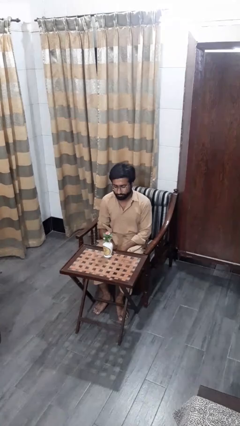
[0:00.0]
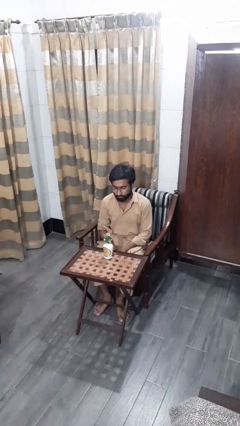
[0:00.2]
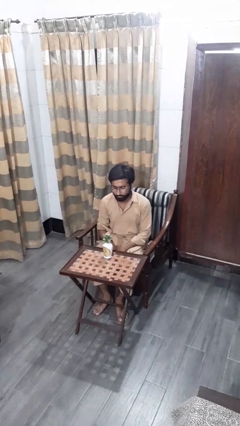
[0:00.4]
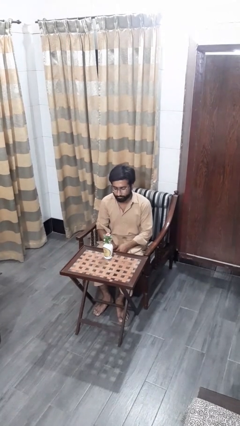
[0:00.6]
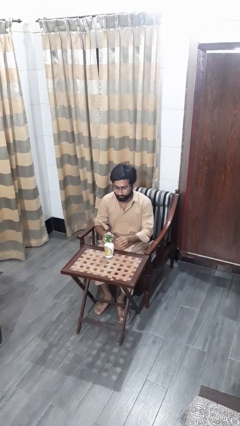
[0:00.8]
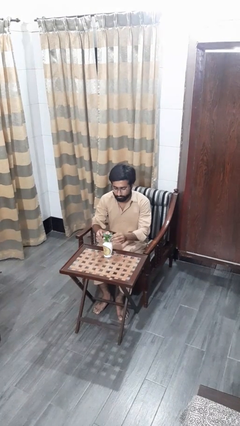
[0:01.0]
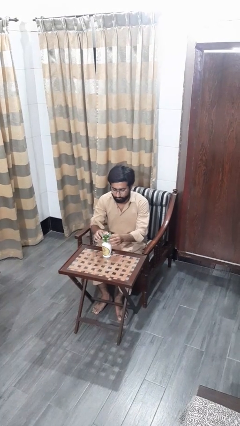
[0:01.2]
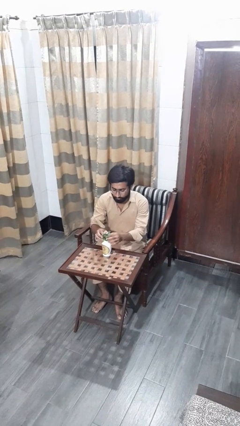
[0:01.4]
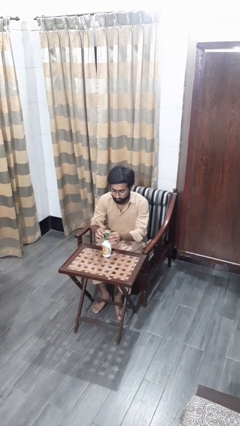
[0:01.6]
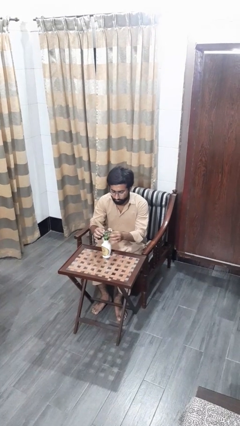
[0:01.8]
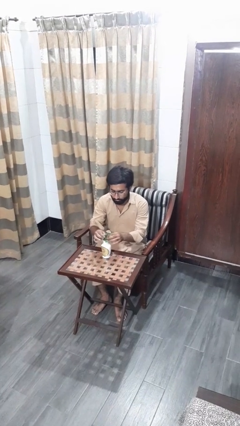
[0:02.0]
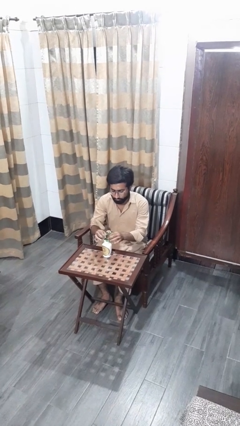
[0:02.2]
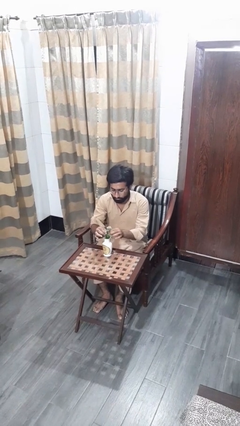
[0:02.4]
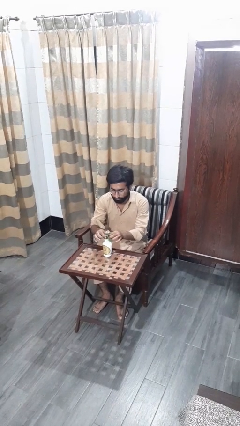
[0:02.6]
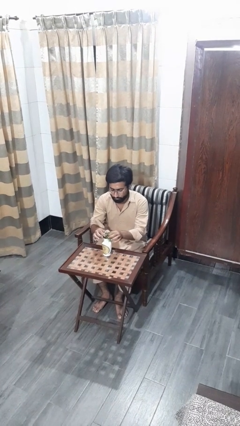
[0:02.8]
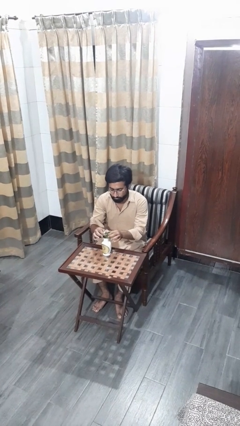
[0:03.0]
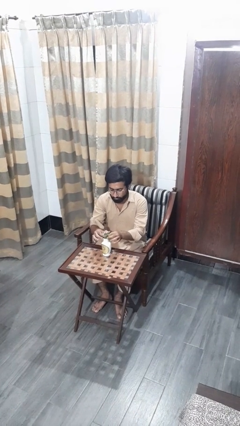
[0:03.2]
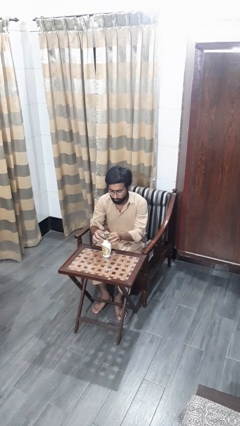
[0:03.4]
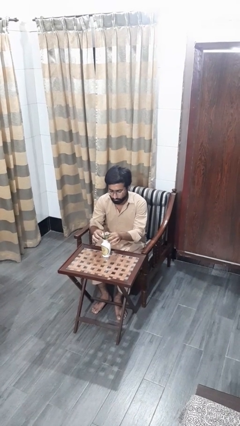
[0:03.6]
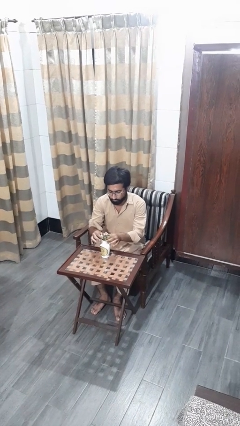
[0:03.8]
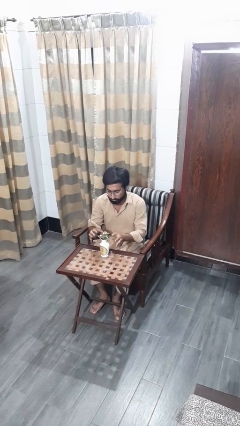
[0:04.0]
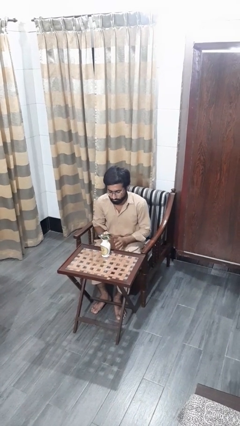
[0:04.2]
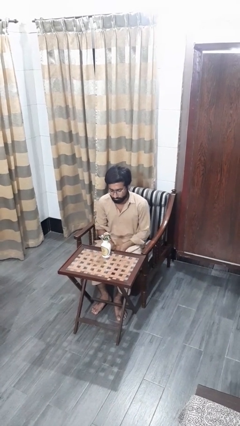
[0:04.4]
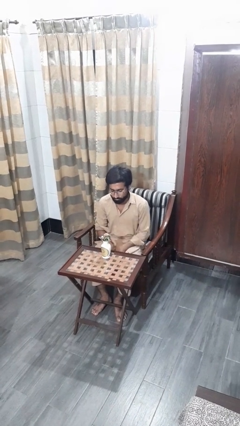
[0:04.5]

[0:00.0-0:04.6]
person arranges flowers in vase

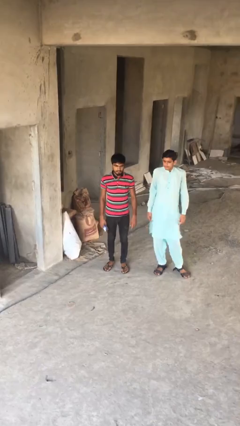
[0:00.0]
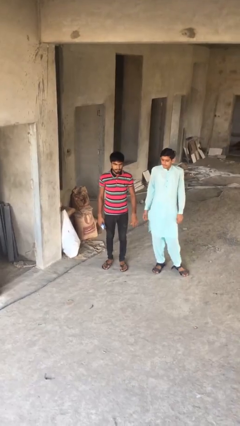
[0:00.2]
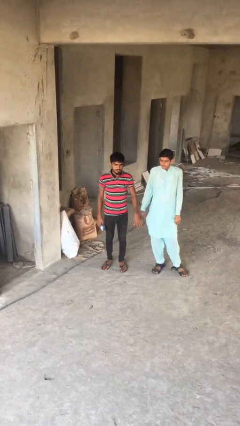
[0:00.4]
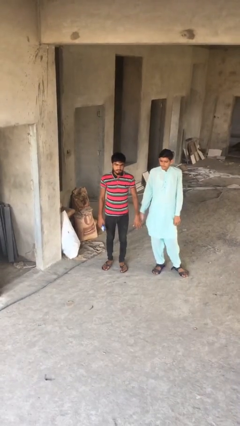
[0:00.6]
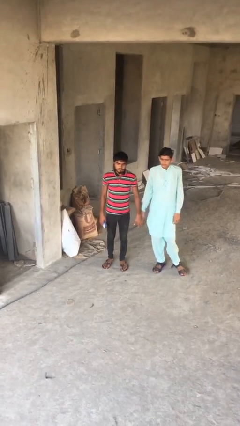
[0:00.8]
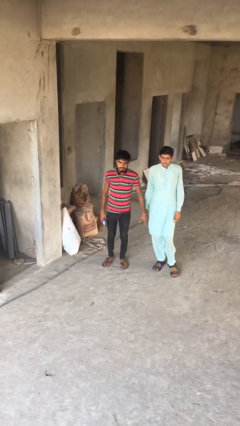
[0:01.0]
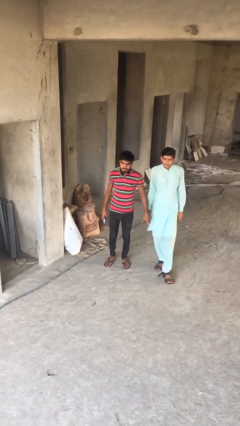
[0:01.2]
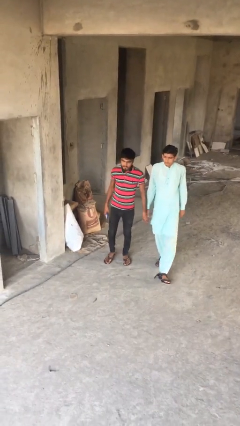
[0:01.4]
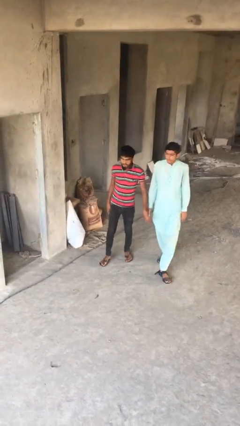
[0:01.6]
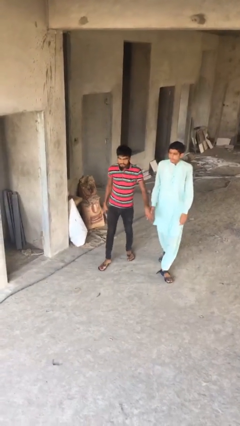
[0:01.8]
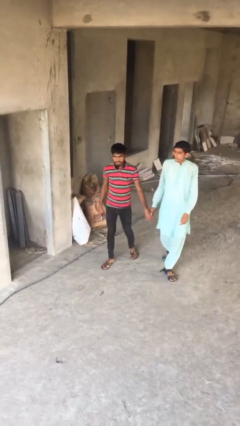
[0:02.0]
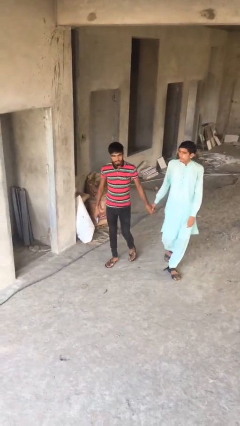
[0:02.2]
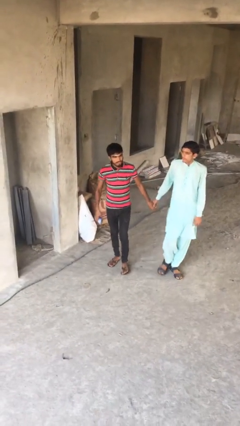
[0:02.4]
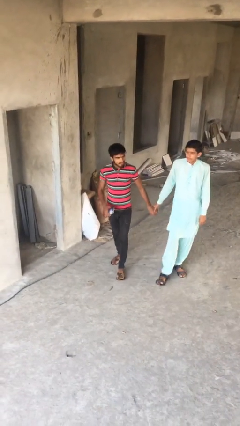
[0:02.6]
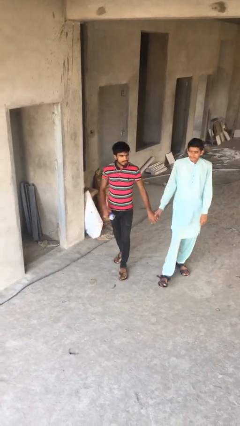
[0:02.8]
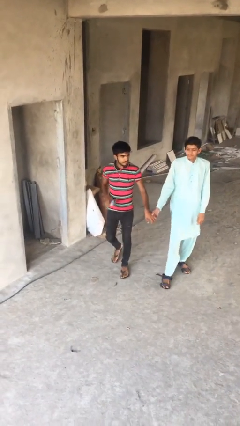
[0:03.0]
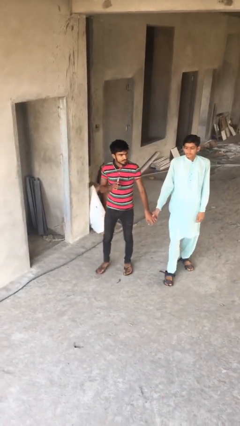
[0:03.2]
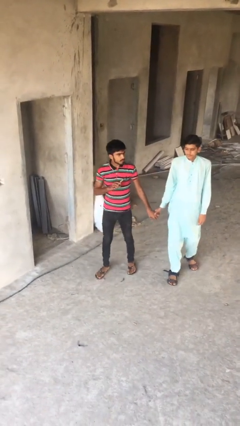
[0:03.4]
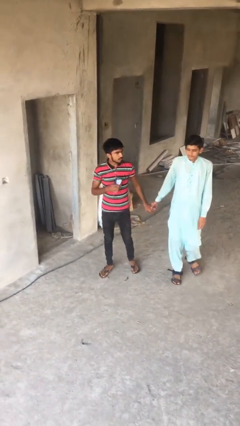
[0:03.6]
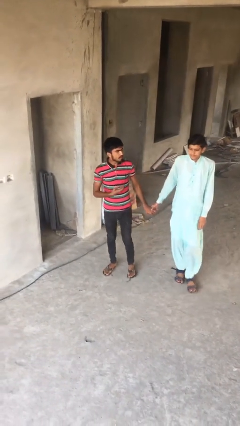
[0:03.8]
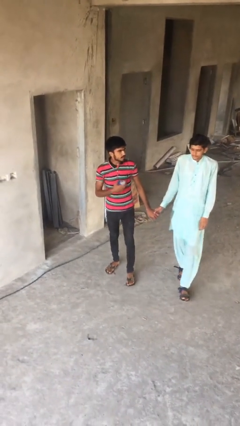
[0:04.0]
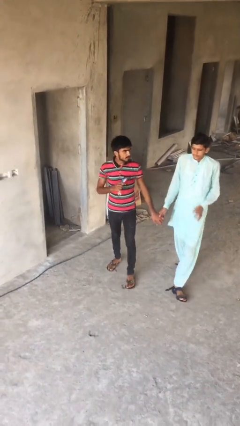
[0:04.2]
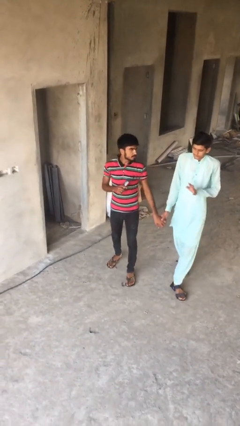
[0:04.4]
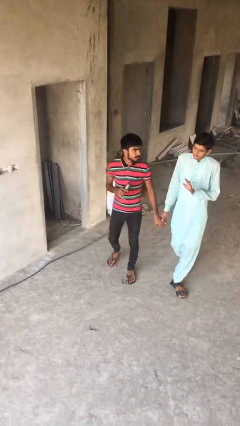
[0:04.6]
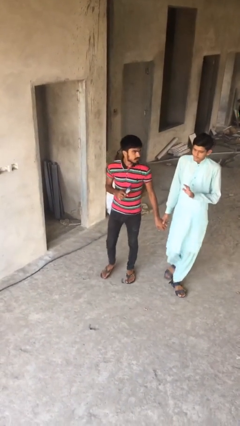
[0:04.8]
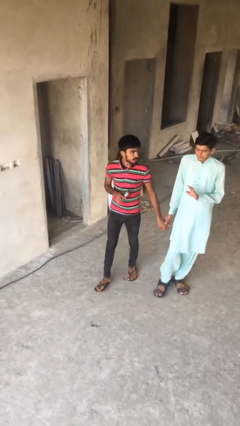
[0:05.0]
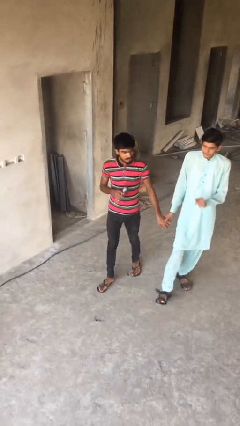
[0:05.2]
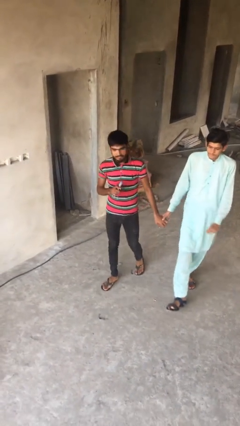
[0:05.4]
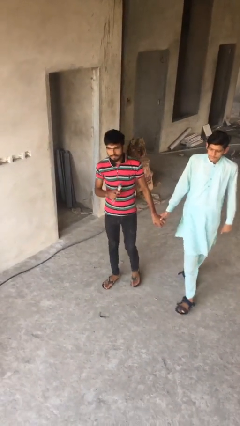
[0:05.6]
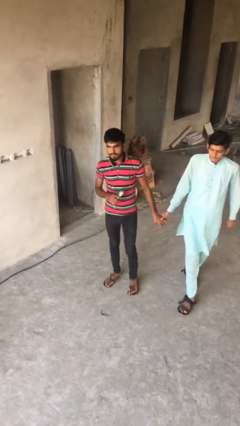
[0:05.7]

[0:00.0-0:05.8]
person holds hand

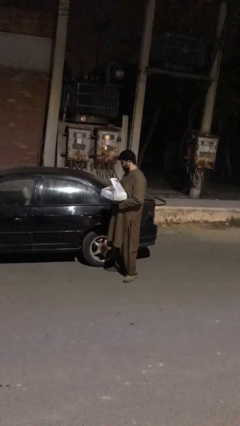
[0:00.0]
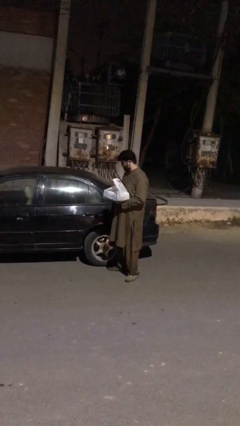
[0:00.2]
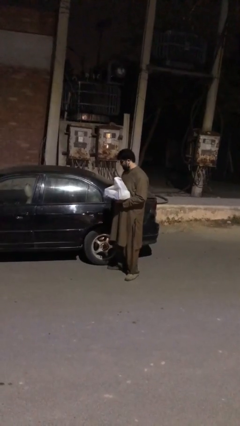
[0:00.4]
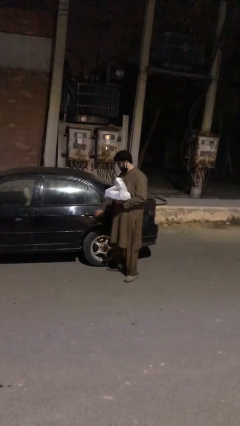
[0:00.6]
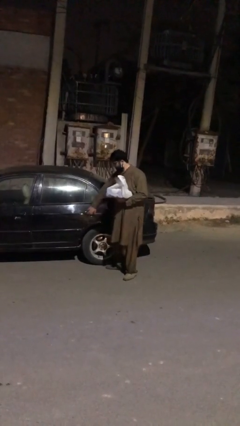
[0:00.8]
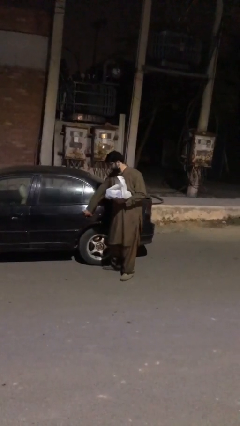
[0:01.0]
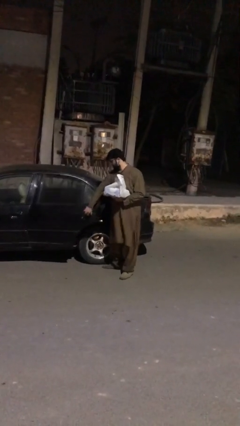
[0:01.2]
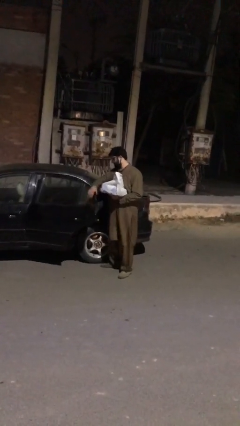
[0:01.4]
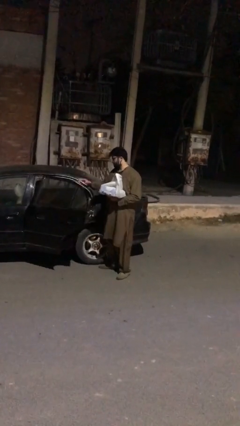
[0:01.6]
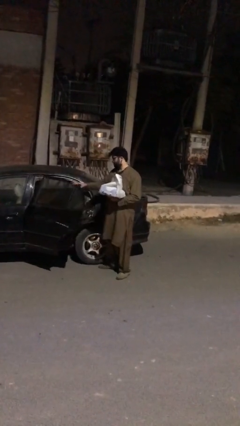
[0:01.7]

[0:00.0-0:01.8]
person opens car door

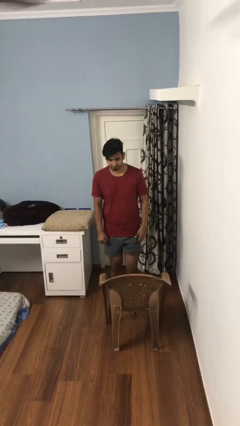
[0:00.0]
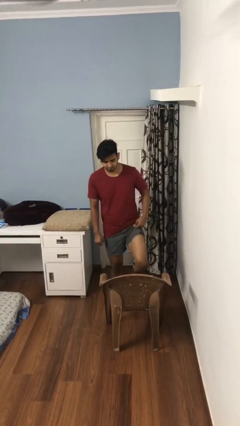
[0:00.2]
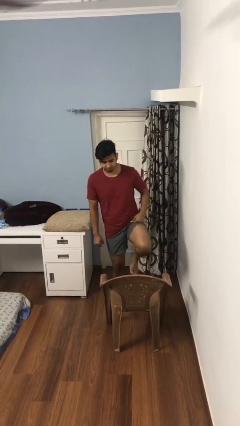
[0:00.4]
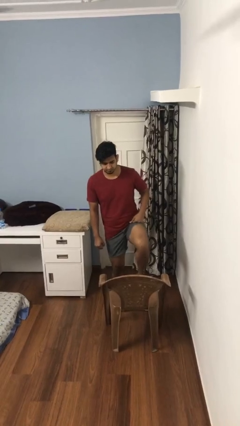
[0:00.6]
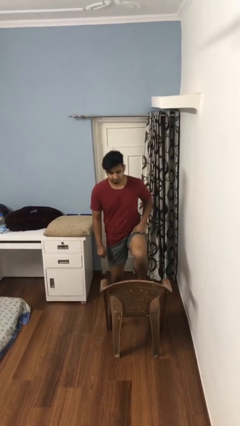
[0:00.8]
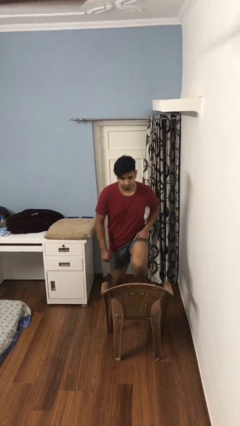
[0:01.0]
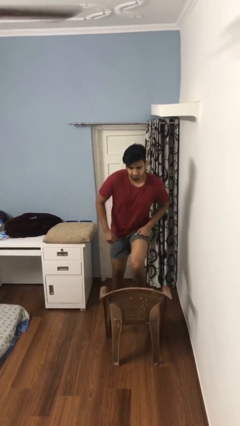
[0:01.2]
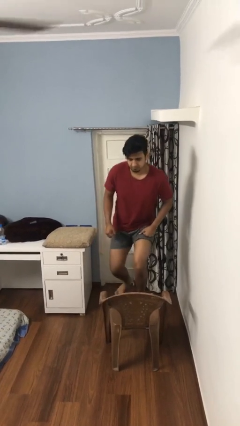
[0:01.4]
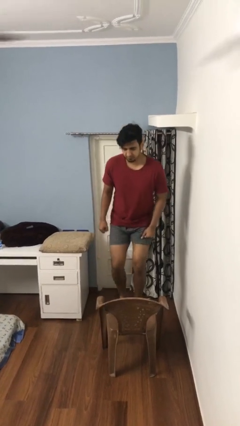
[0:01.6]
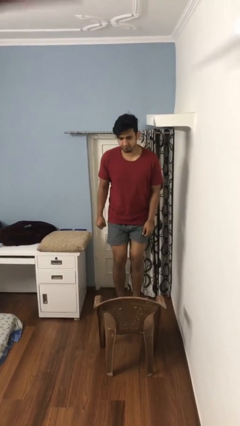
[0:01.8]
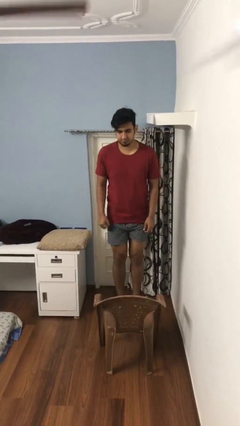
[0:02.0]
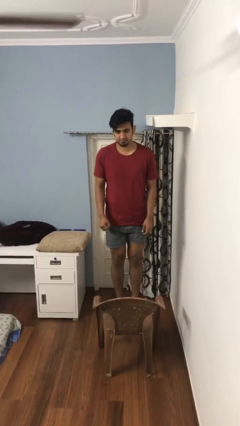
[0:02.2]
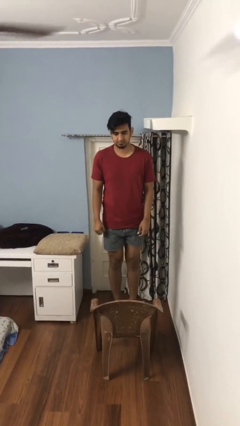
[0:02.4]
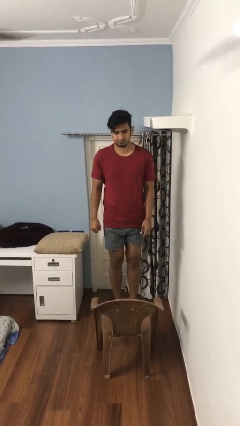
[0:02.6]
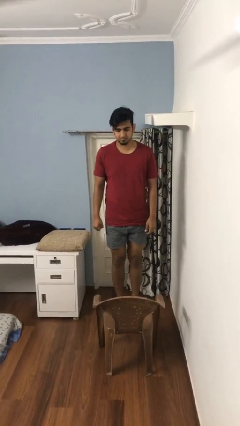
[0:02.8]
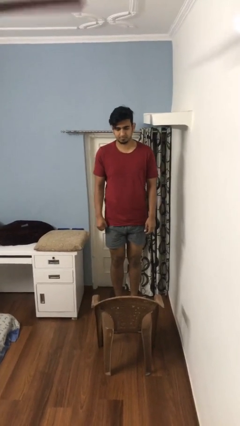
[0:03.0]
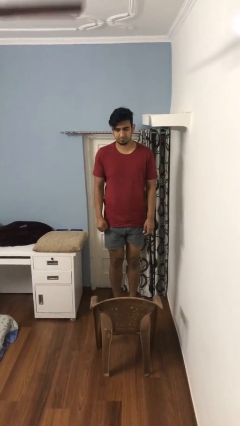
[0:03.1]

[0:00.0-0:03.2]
person climbs on chair

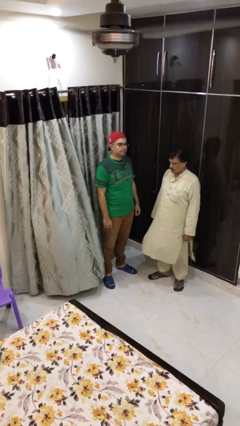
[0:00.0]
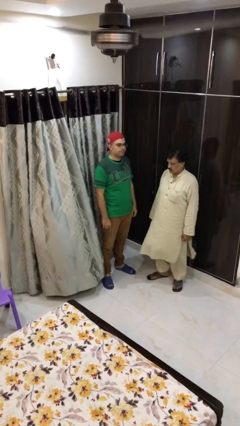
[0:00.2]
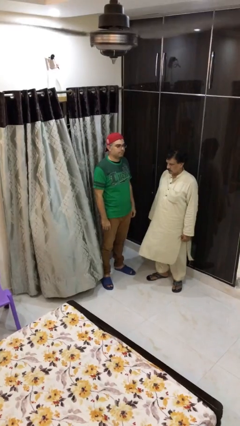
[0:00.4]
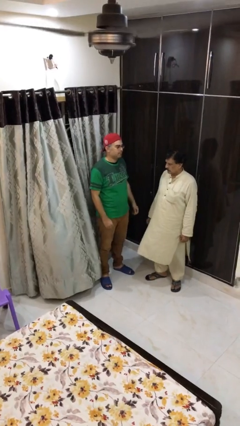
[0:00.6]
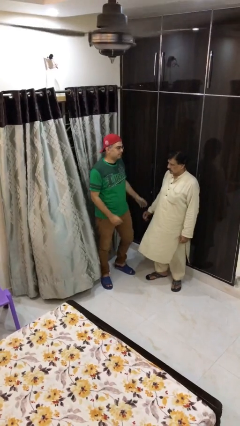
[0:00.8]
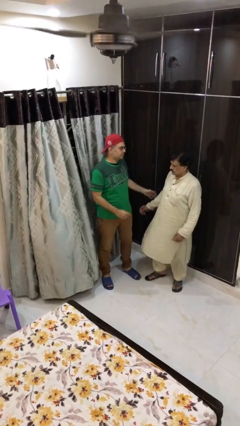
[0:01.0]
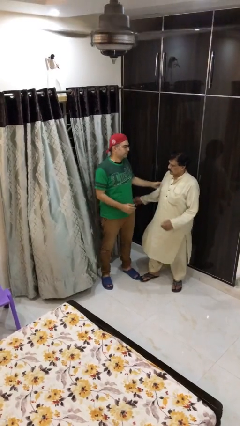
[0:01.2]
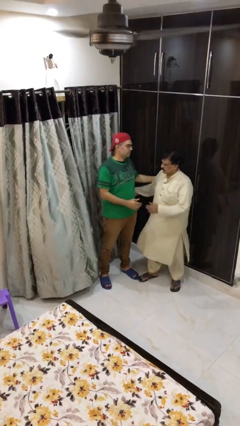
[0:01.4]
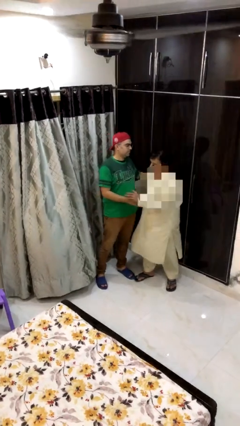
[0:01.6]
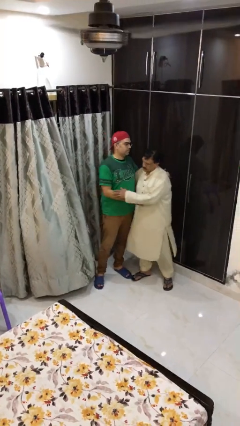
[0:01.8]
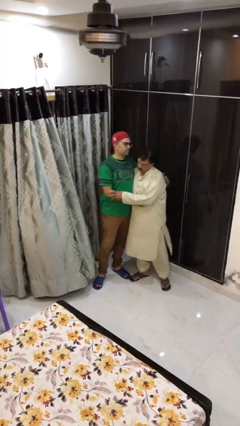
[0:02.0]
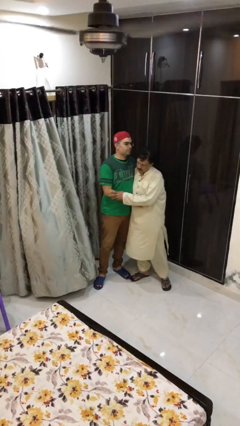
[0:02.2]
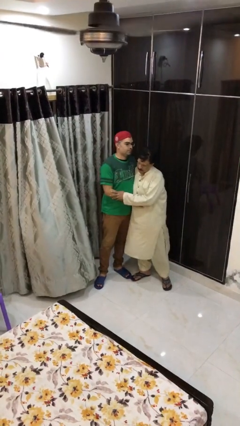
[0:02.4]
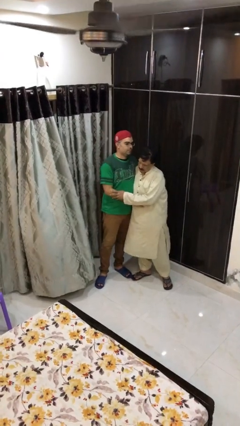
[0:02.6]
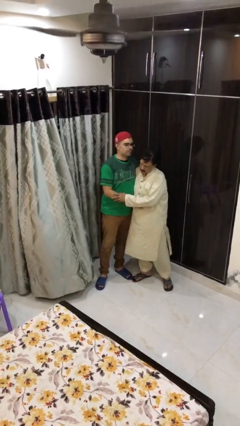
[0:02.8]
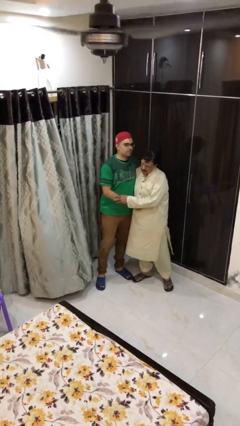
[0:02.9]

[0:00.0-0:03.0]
person embraces person
